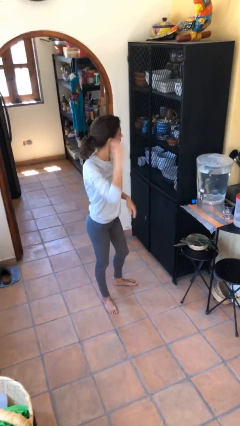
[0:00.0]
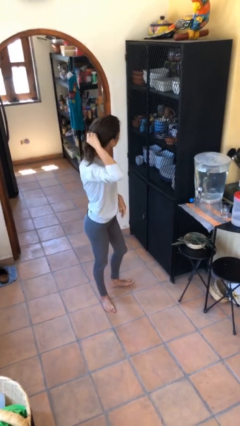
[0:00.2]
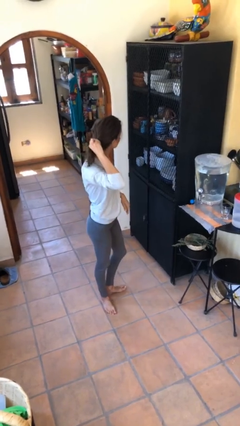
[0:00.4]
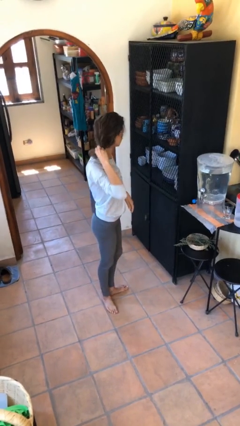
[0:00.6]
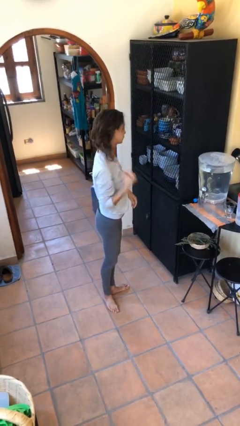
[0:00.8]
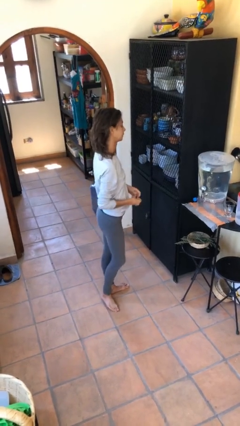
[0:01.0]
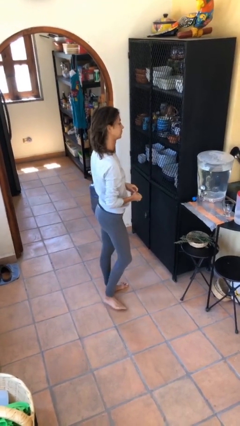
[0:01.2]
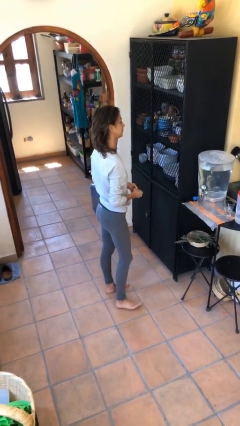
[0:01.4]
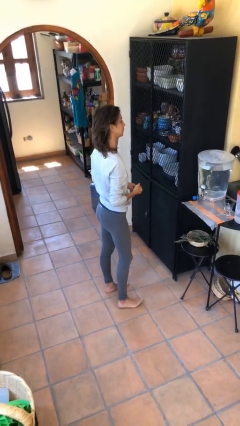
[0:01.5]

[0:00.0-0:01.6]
person takes off hairtie

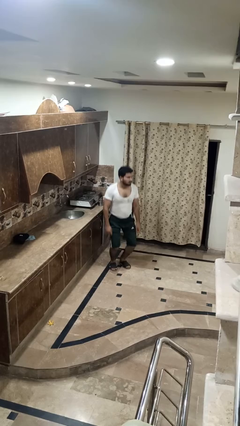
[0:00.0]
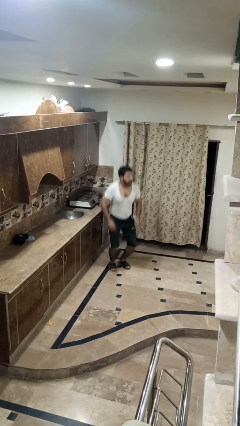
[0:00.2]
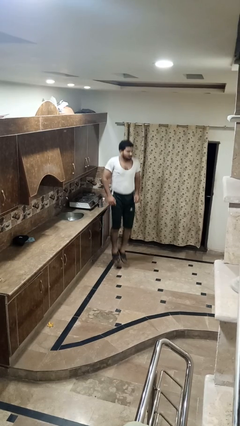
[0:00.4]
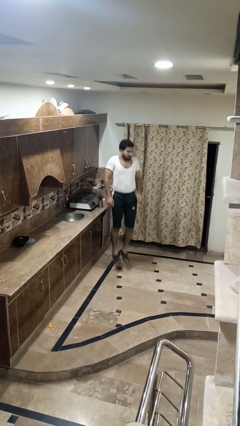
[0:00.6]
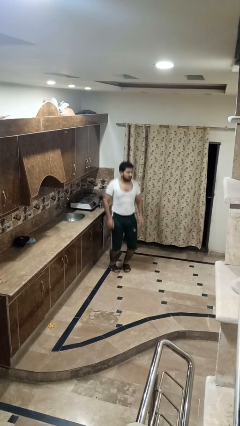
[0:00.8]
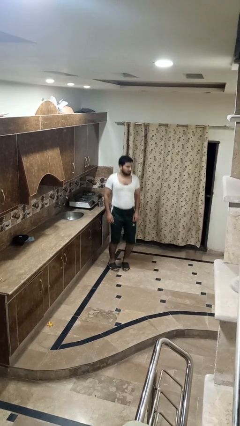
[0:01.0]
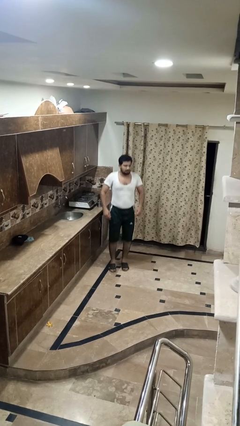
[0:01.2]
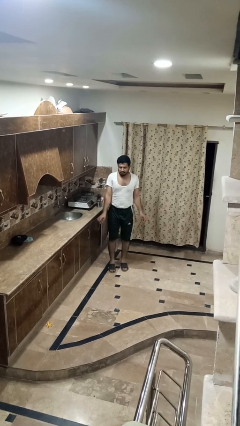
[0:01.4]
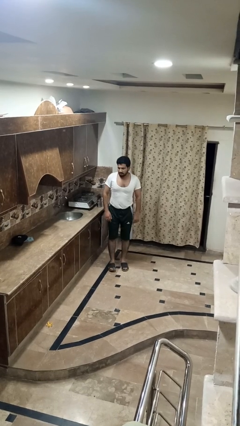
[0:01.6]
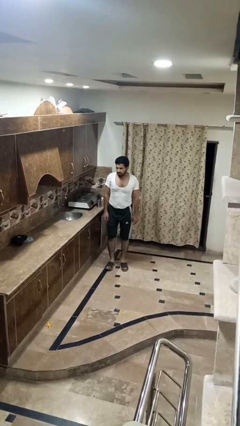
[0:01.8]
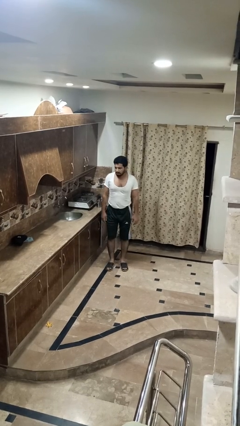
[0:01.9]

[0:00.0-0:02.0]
person jumps

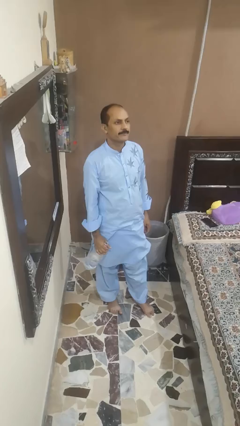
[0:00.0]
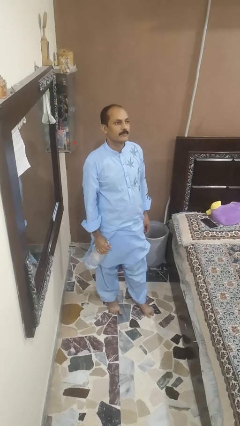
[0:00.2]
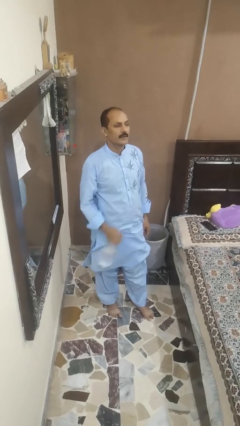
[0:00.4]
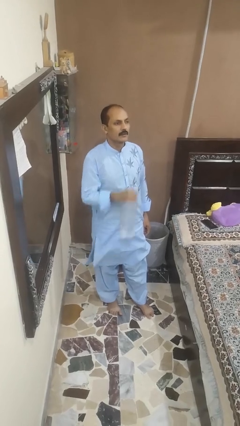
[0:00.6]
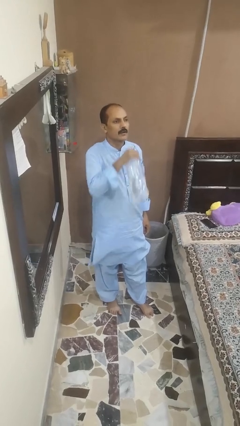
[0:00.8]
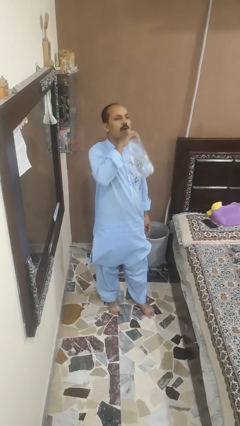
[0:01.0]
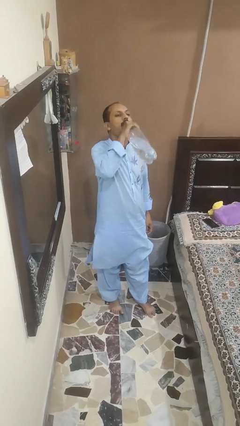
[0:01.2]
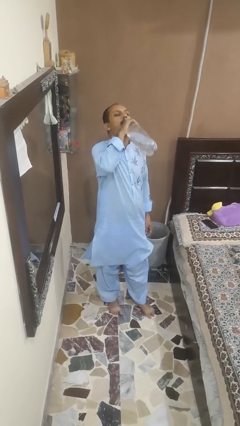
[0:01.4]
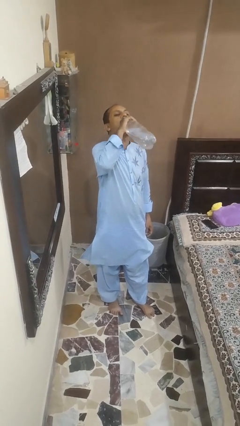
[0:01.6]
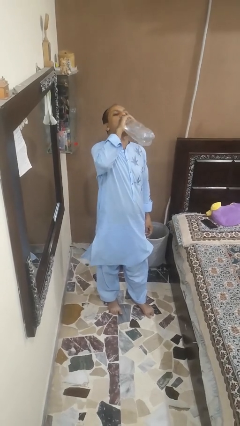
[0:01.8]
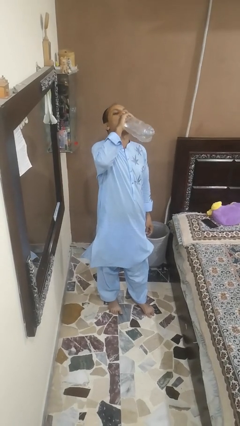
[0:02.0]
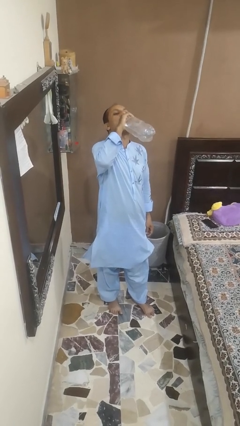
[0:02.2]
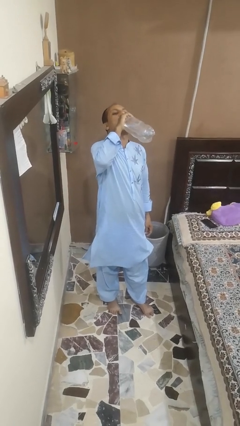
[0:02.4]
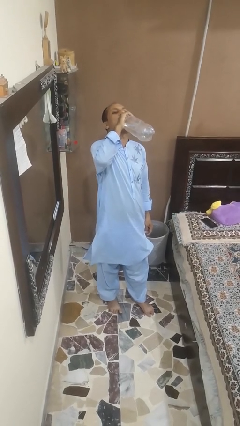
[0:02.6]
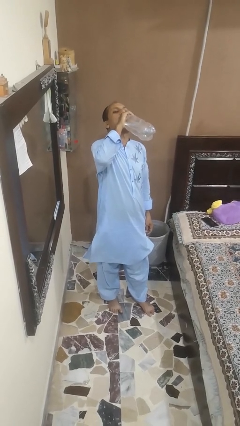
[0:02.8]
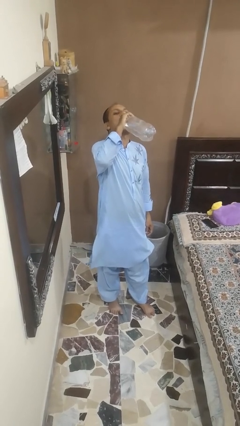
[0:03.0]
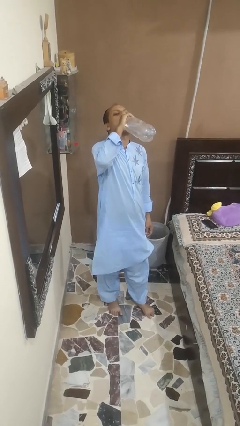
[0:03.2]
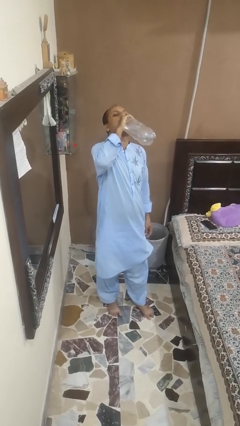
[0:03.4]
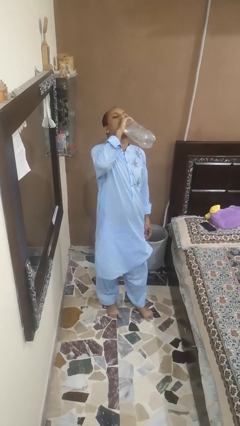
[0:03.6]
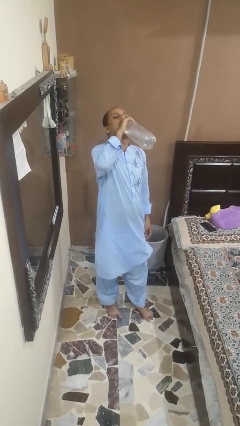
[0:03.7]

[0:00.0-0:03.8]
person drinks from bottle

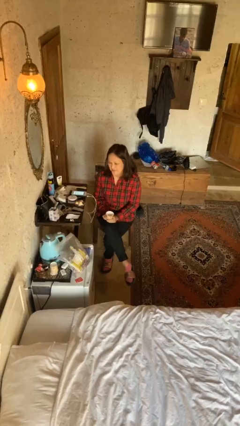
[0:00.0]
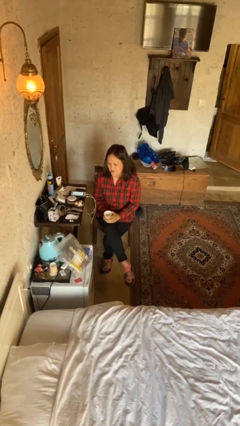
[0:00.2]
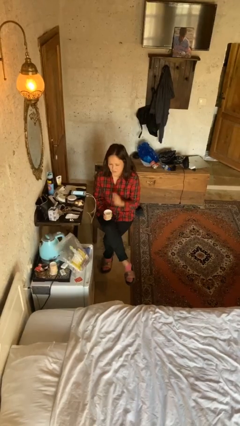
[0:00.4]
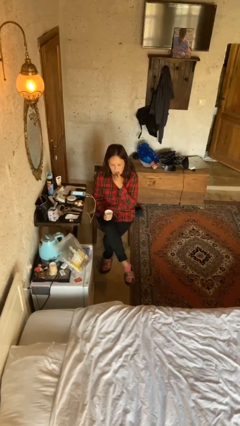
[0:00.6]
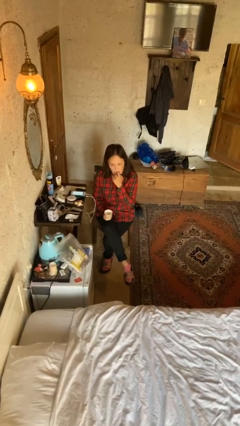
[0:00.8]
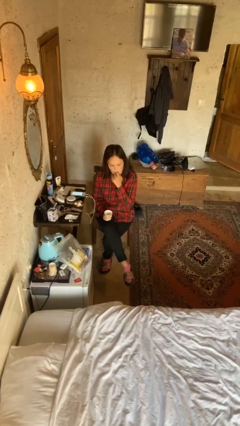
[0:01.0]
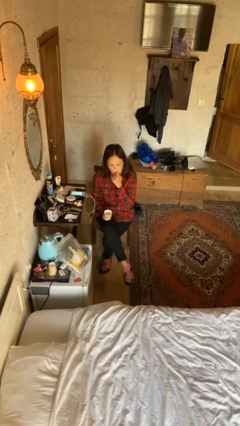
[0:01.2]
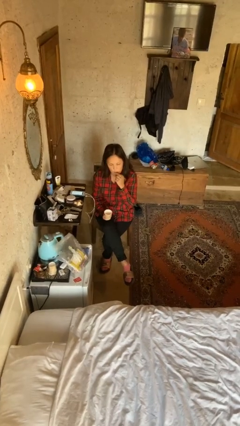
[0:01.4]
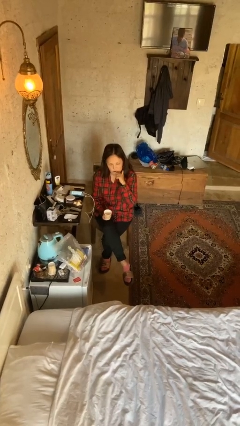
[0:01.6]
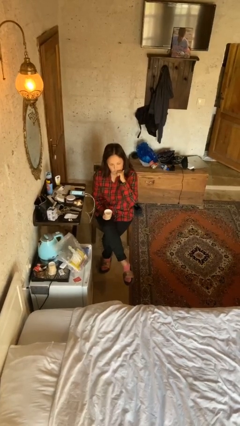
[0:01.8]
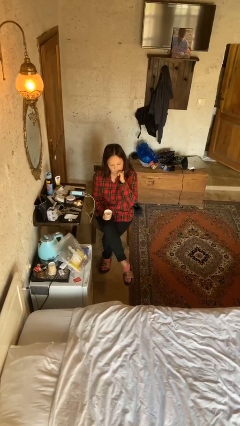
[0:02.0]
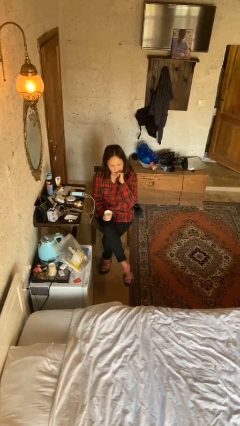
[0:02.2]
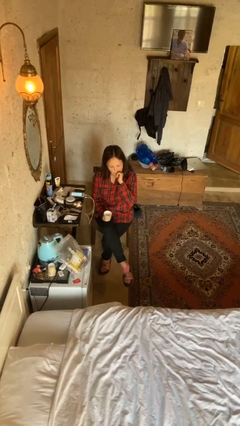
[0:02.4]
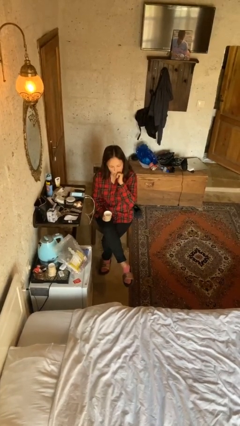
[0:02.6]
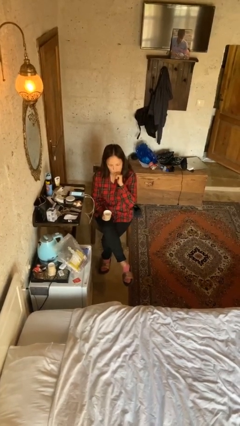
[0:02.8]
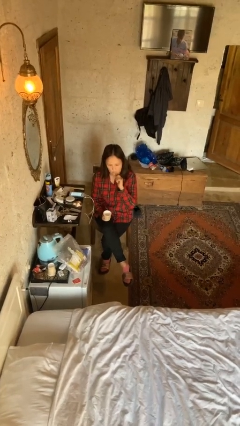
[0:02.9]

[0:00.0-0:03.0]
person licks fingers

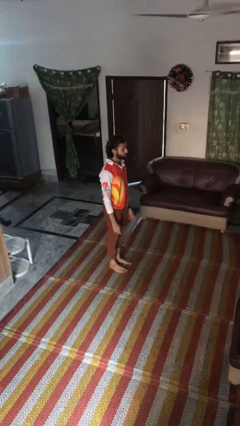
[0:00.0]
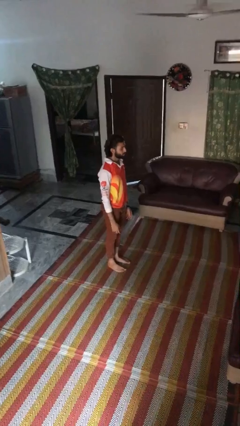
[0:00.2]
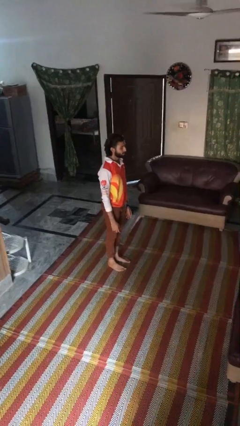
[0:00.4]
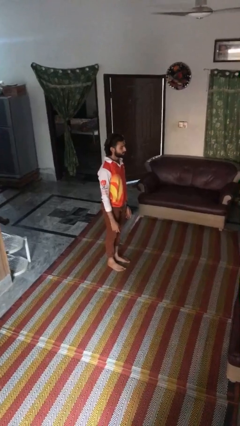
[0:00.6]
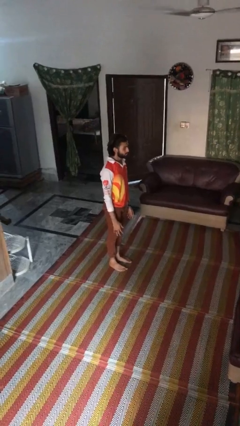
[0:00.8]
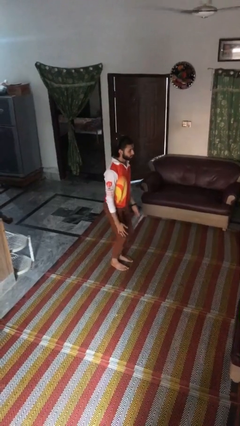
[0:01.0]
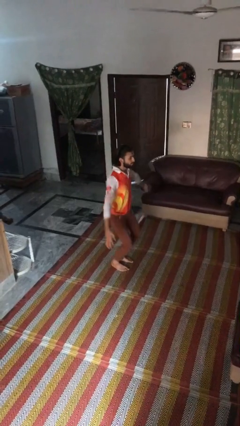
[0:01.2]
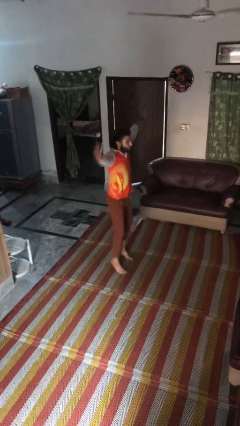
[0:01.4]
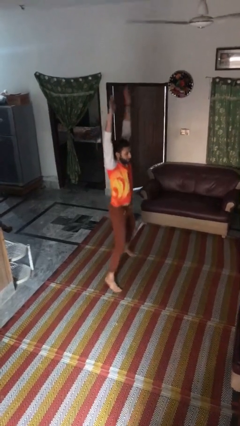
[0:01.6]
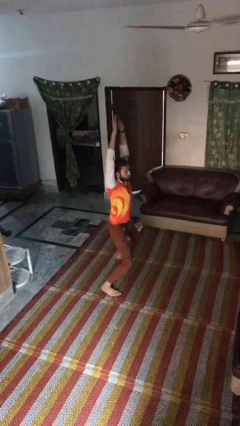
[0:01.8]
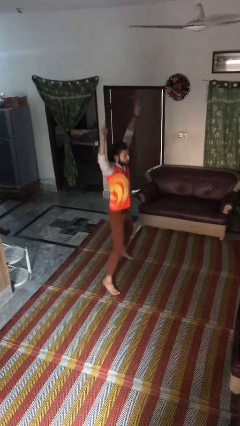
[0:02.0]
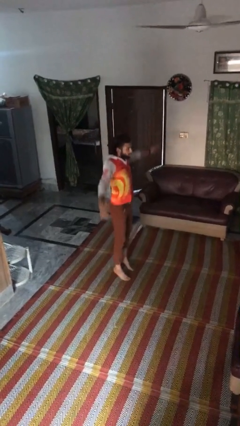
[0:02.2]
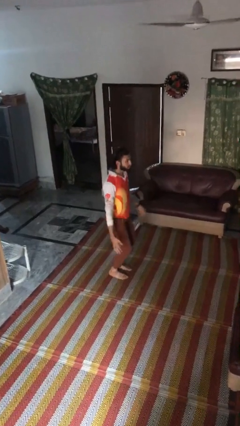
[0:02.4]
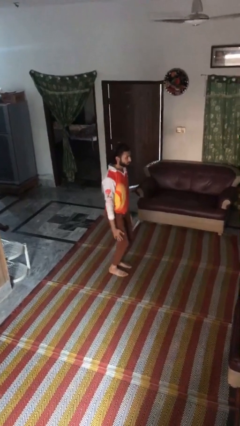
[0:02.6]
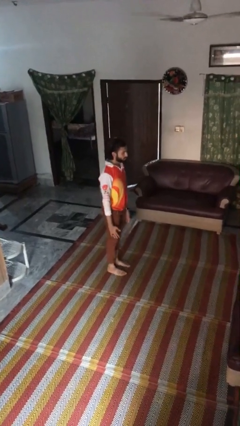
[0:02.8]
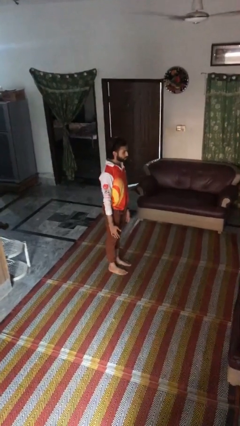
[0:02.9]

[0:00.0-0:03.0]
person exercises with jumping jacks

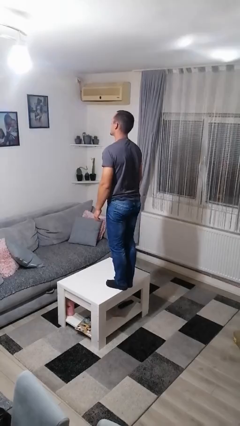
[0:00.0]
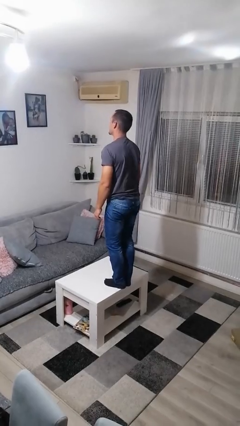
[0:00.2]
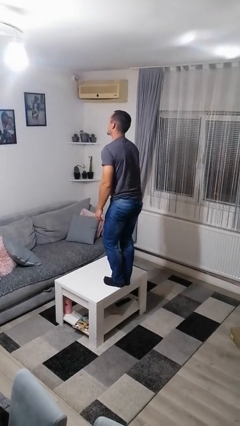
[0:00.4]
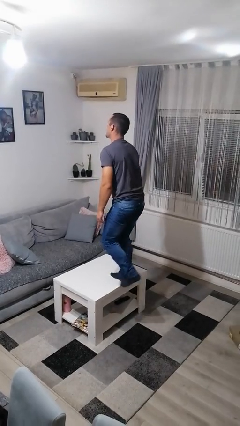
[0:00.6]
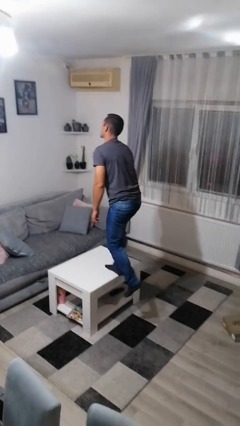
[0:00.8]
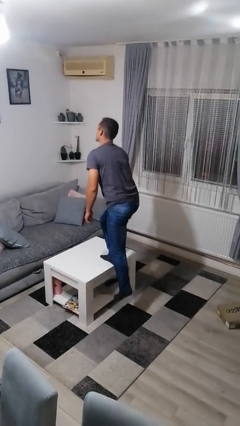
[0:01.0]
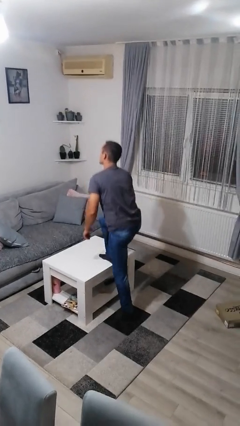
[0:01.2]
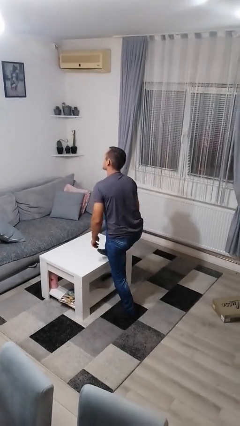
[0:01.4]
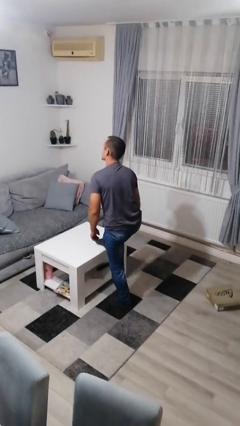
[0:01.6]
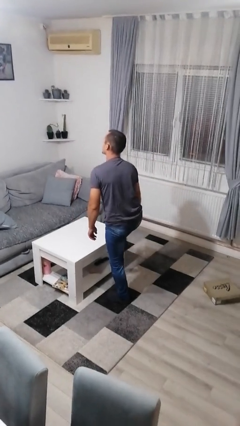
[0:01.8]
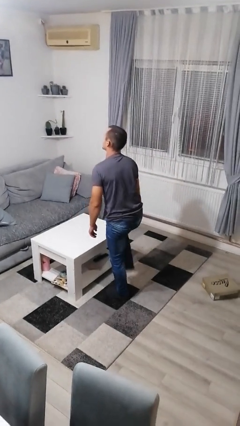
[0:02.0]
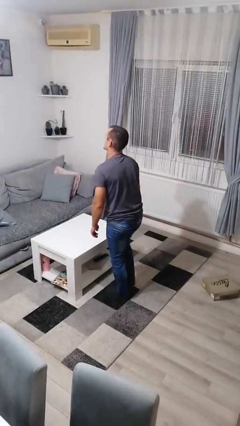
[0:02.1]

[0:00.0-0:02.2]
person climbs off table

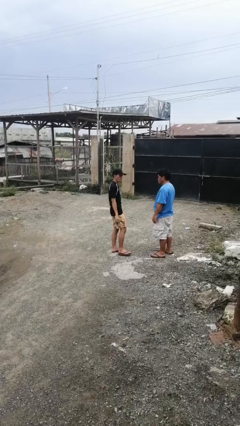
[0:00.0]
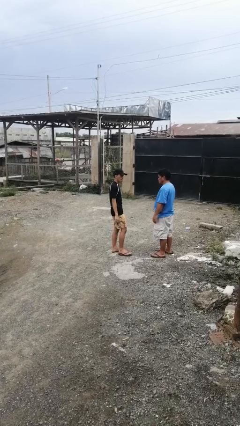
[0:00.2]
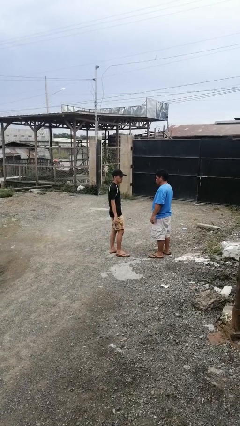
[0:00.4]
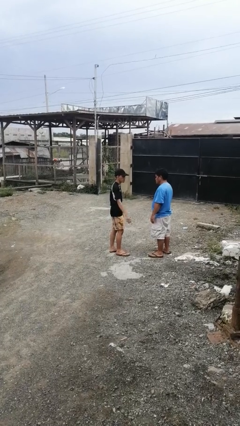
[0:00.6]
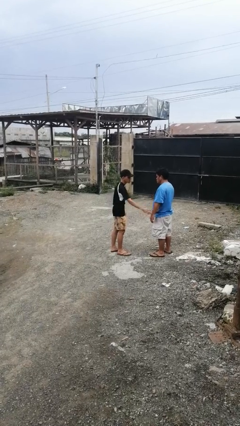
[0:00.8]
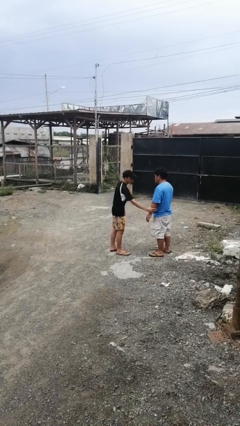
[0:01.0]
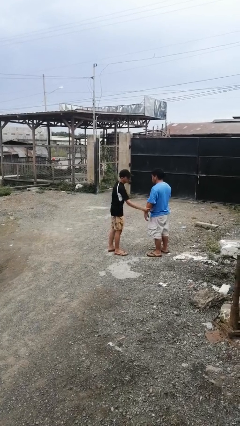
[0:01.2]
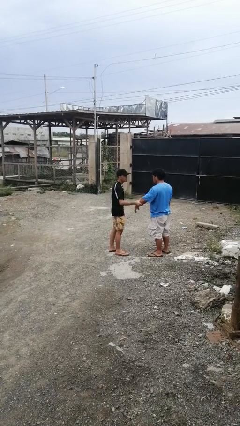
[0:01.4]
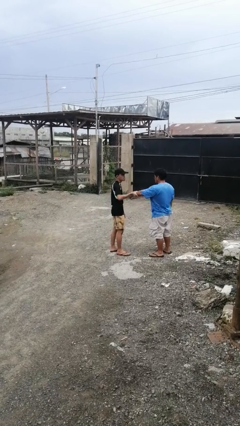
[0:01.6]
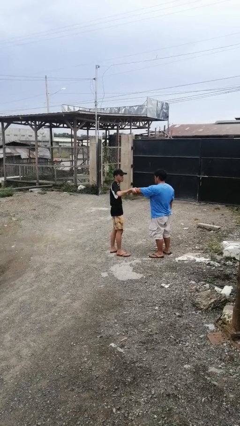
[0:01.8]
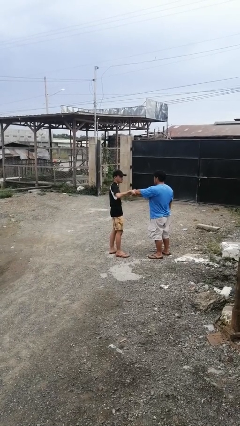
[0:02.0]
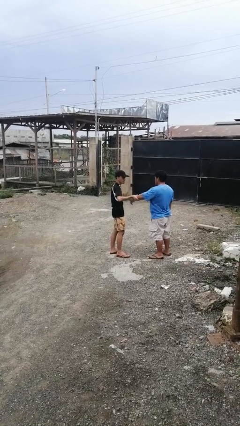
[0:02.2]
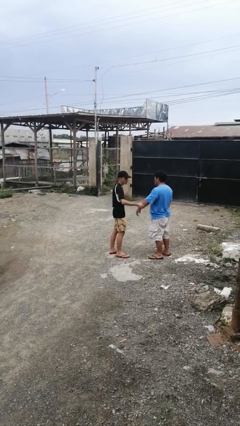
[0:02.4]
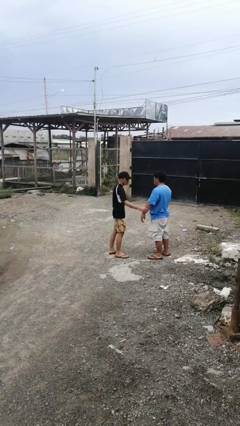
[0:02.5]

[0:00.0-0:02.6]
person grabs person by forearm
